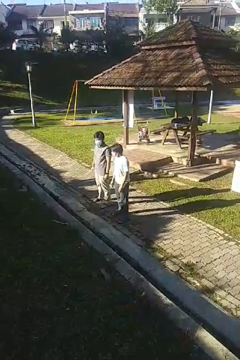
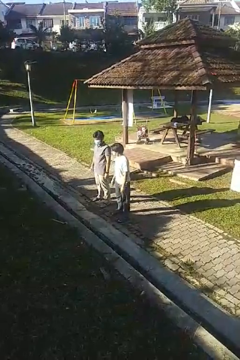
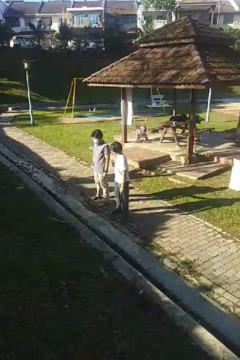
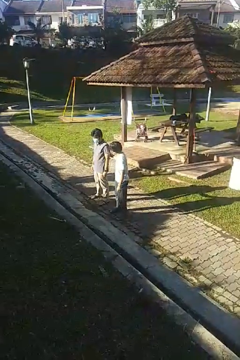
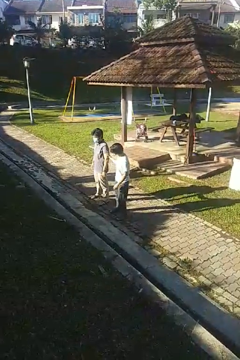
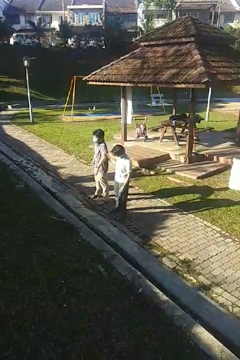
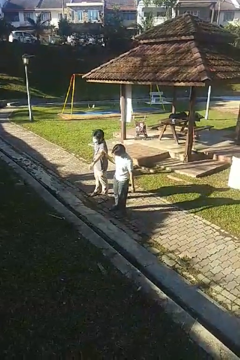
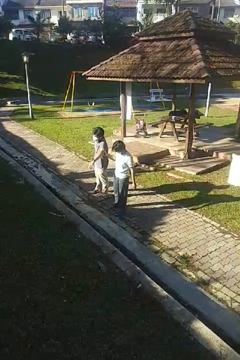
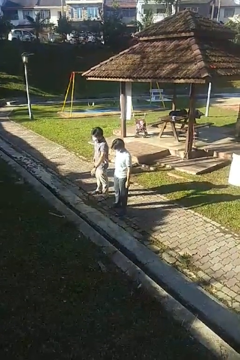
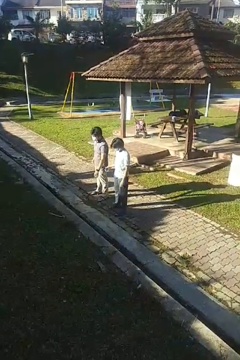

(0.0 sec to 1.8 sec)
person grabs person by bicep

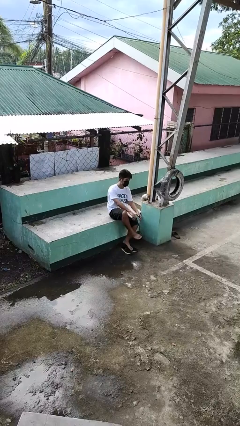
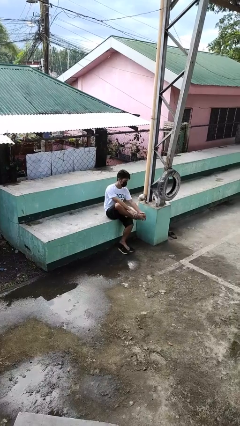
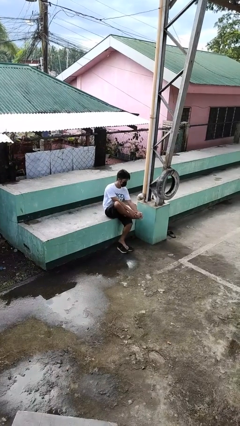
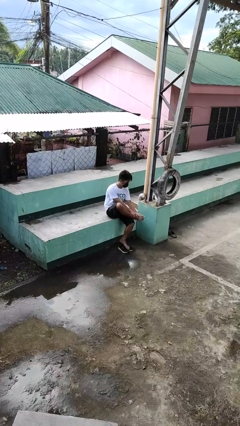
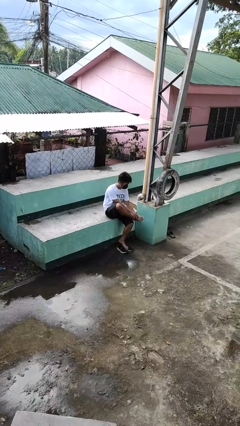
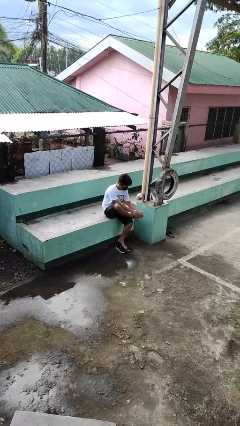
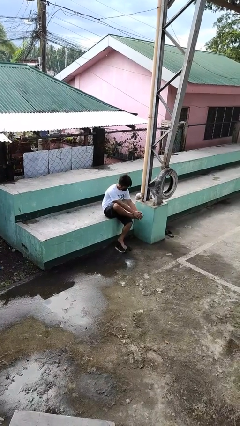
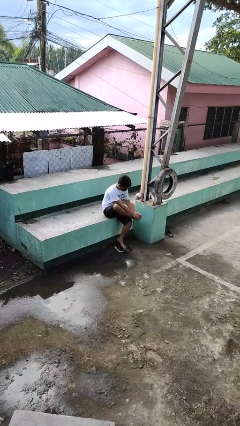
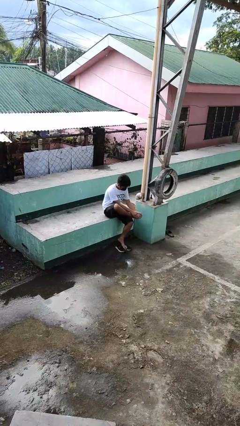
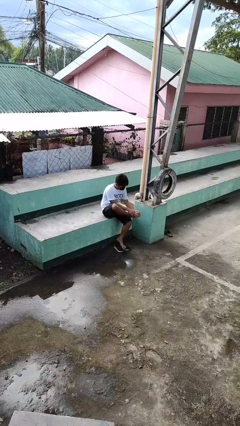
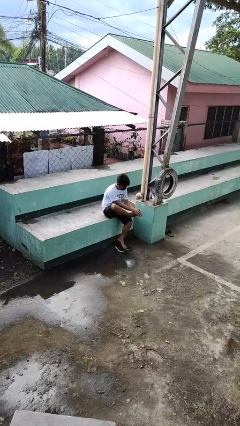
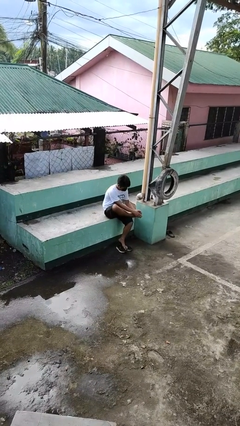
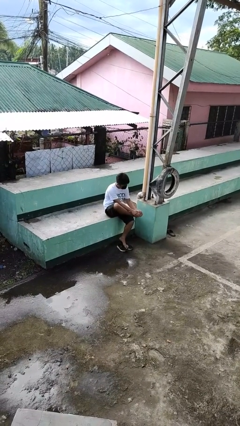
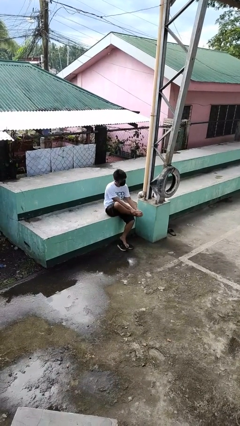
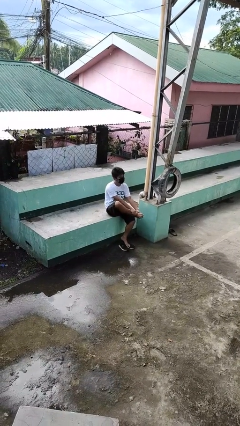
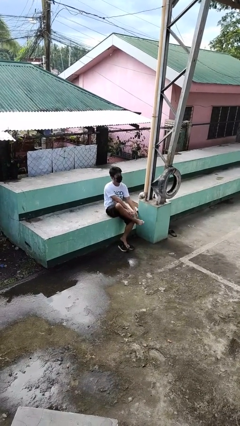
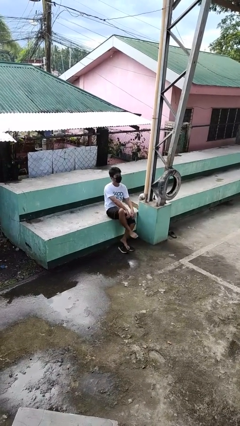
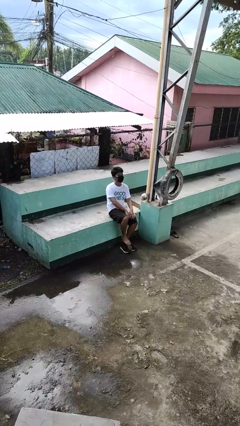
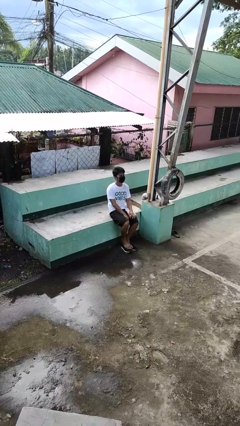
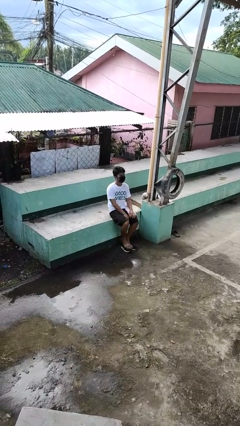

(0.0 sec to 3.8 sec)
person rubs foot

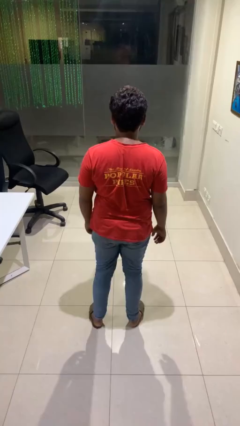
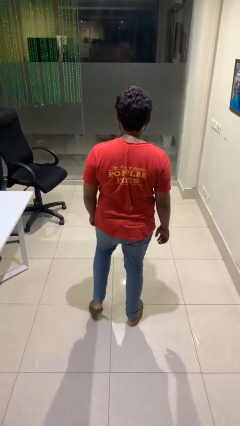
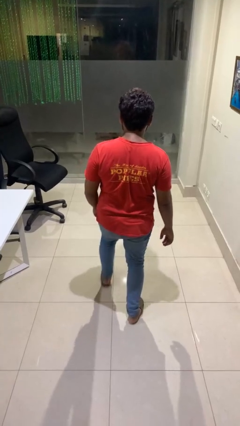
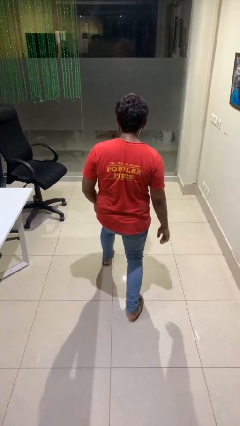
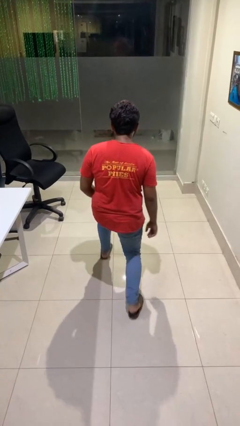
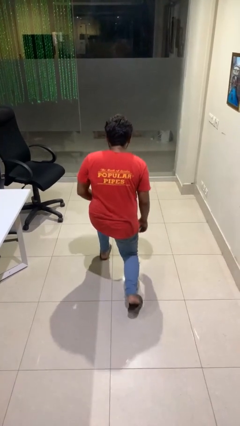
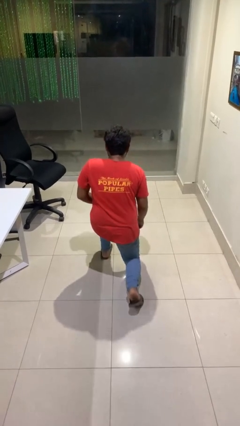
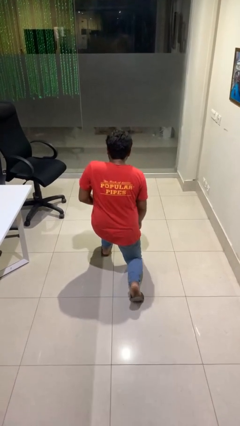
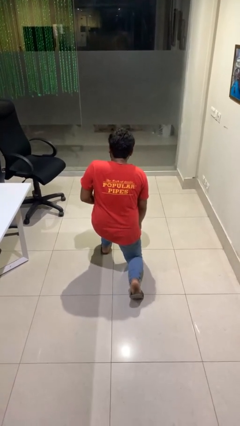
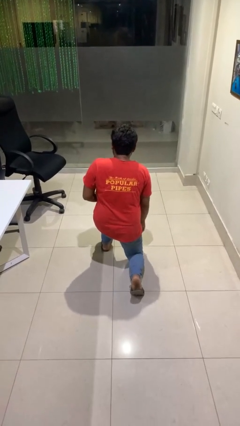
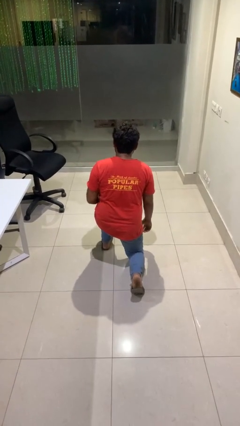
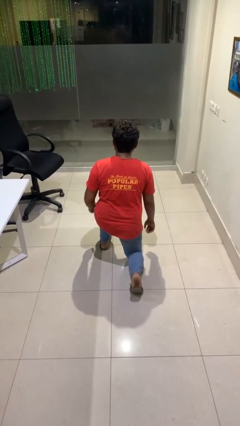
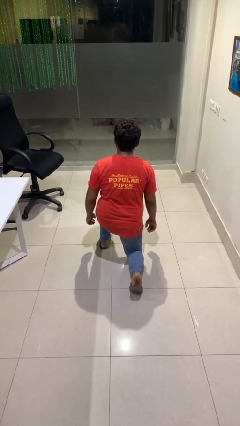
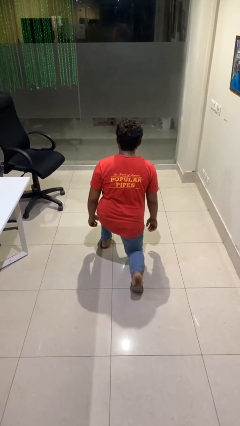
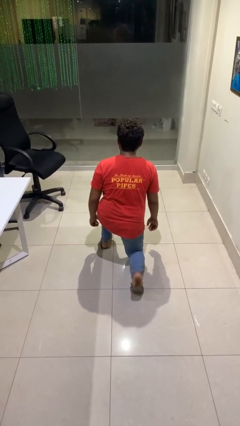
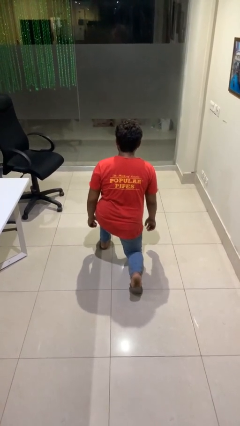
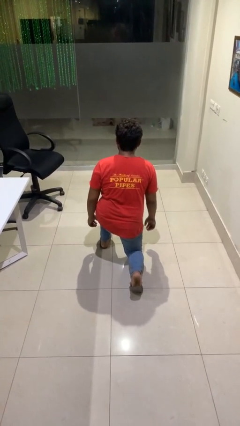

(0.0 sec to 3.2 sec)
person kneels

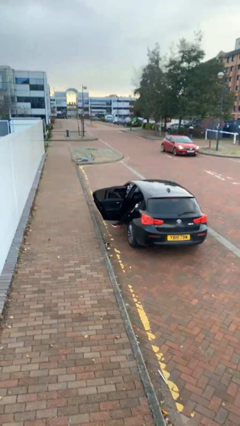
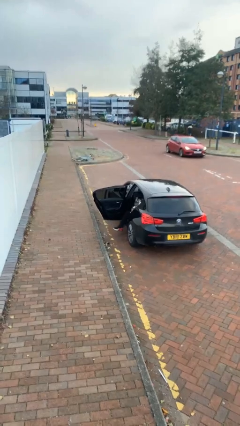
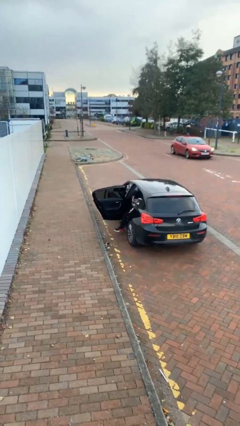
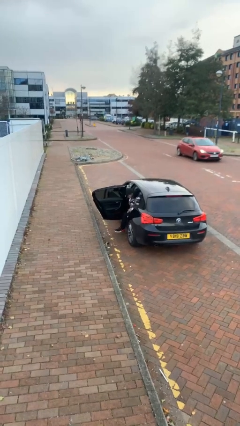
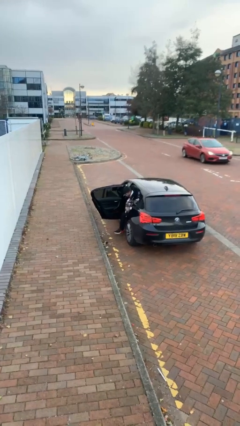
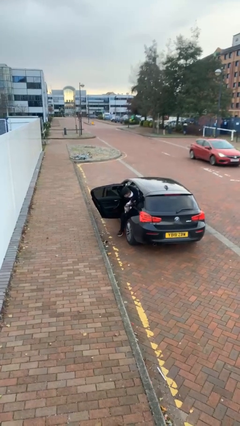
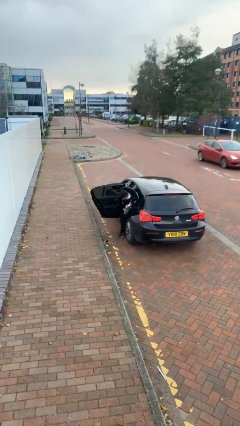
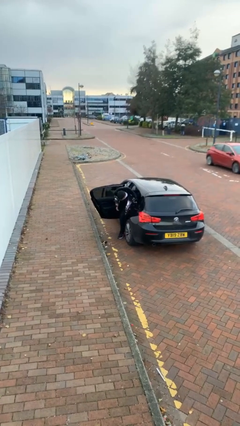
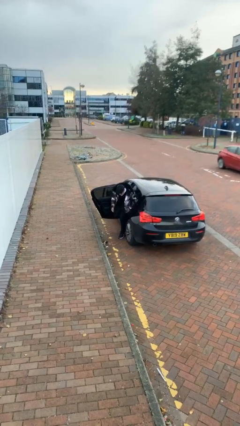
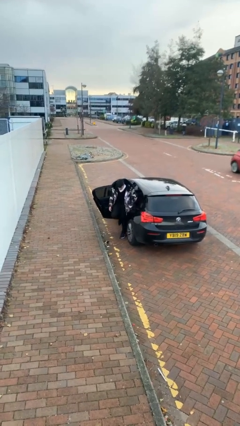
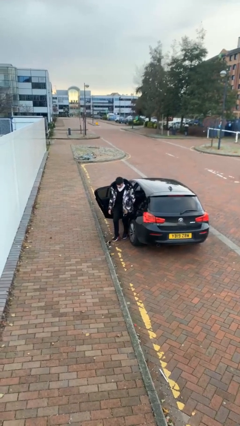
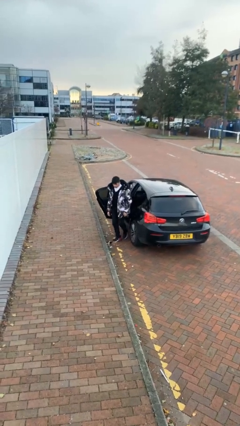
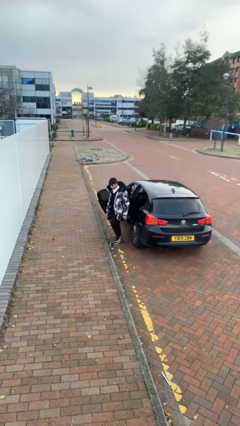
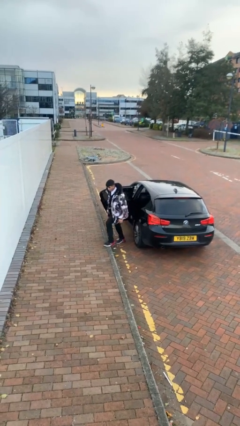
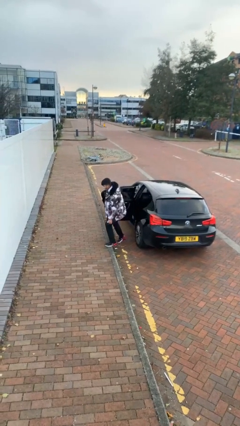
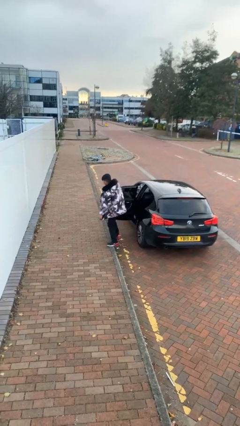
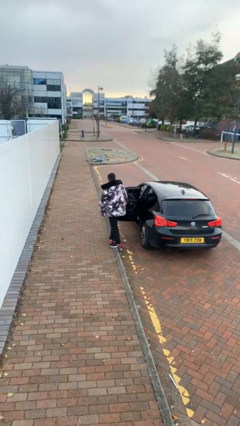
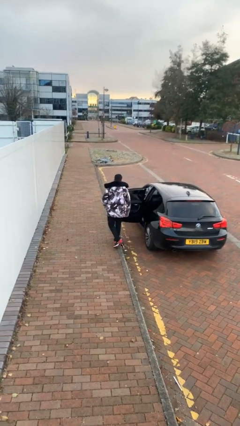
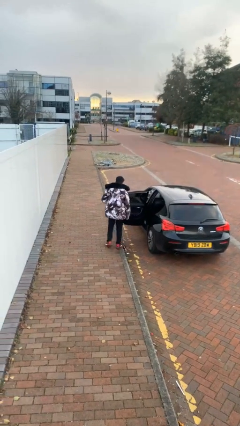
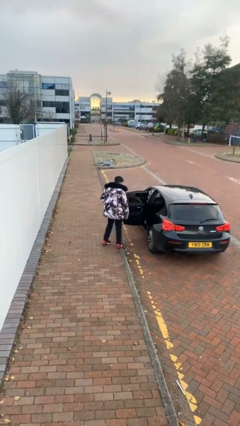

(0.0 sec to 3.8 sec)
person exits car

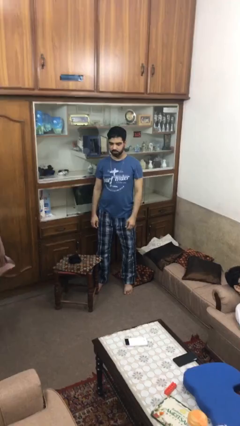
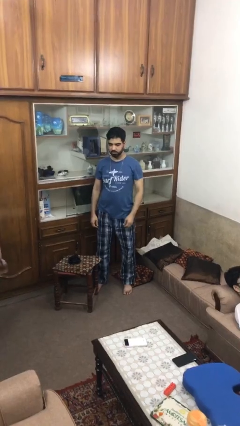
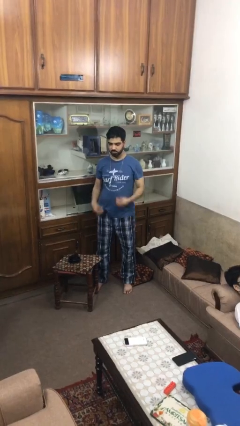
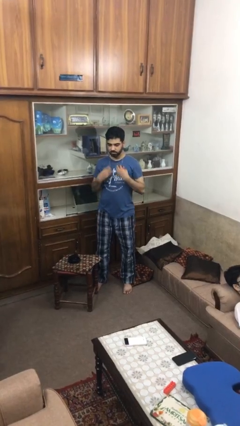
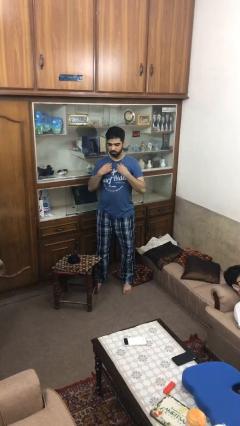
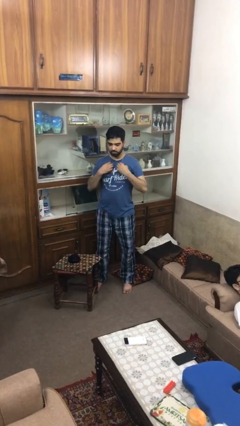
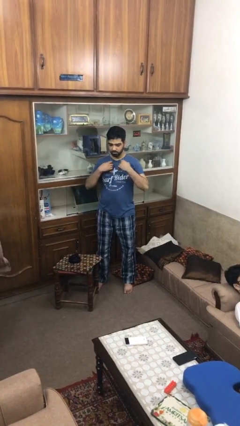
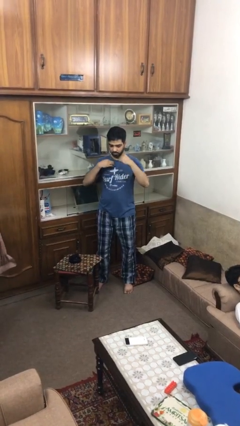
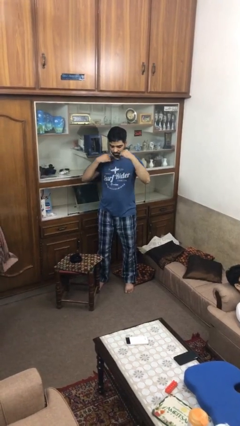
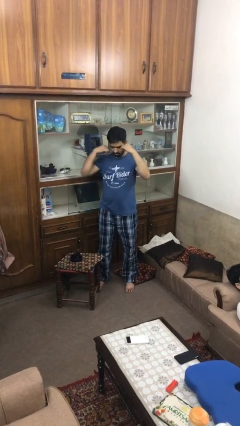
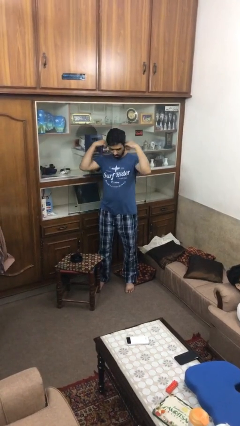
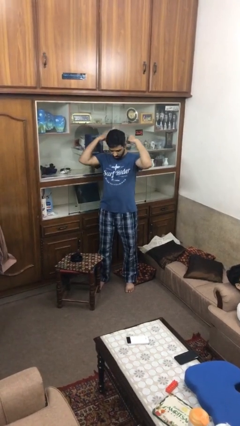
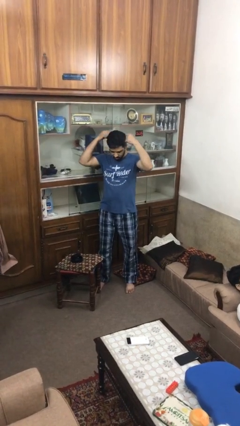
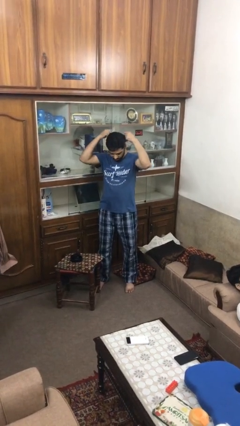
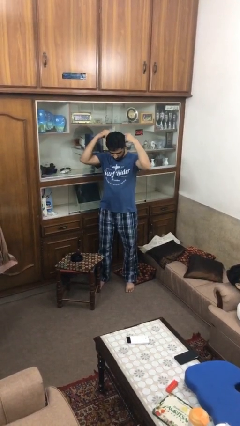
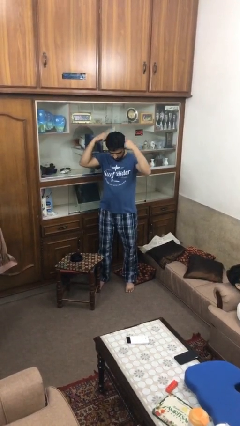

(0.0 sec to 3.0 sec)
person takes off necklace

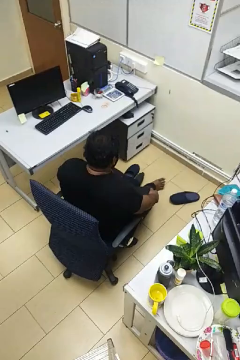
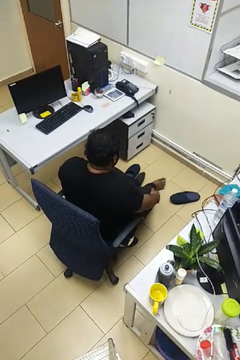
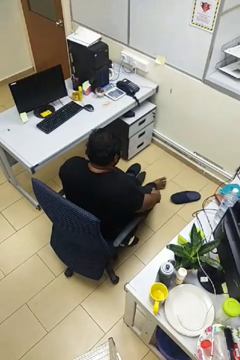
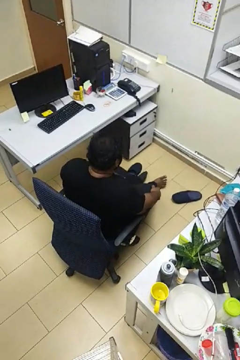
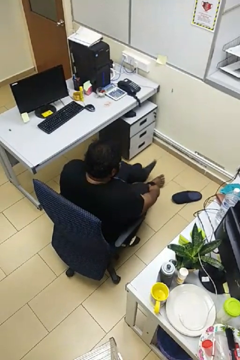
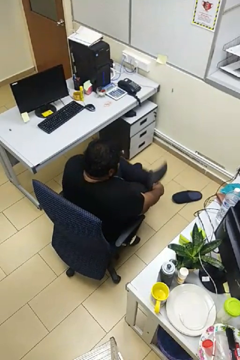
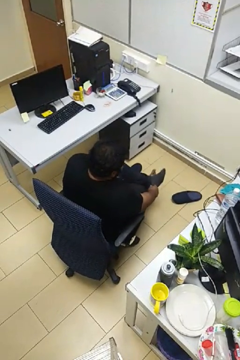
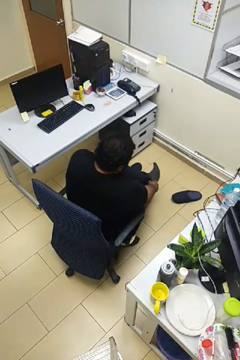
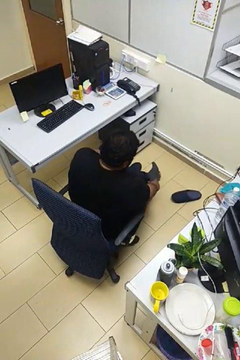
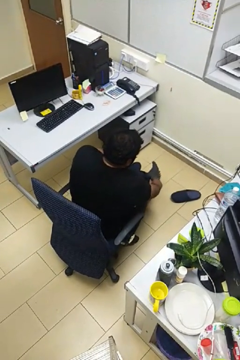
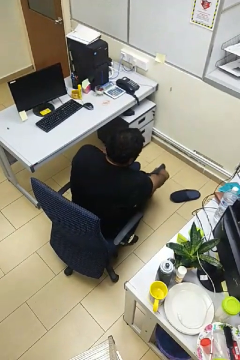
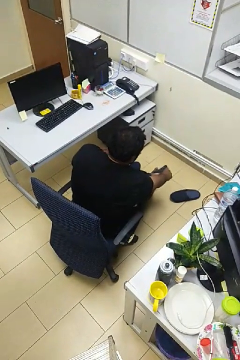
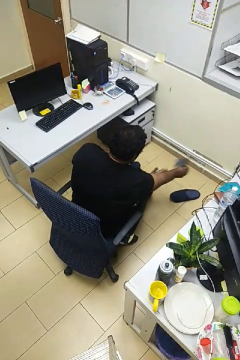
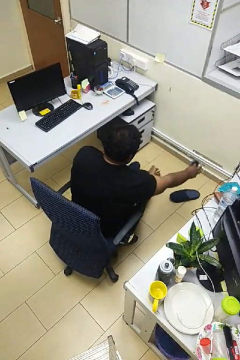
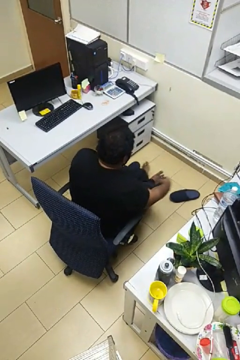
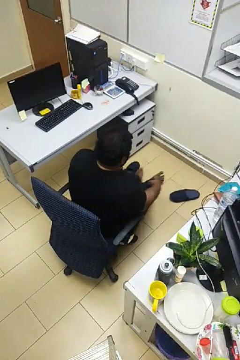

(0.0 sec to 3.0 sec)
person takes off socks
